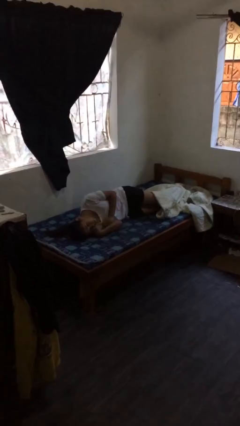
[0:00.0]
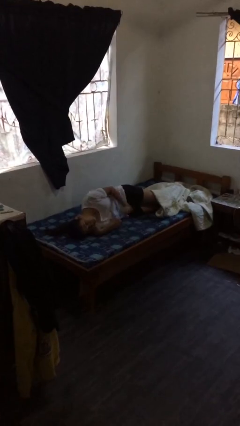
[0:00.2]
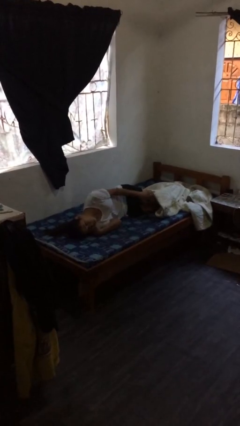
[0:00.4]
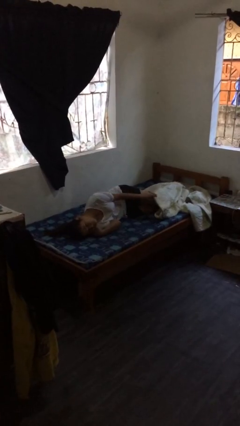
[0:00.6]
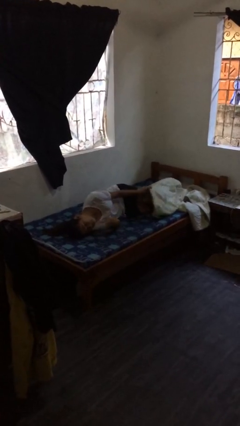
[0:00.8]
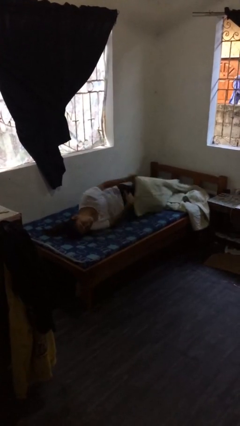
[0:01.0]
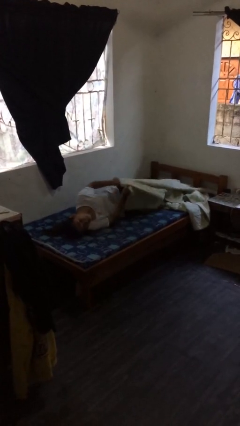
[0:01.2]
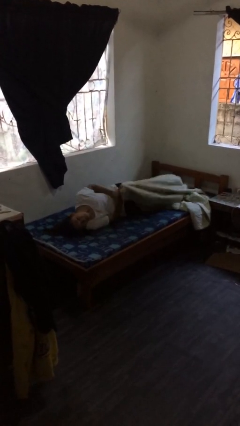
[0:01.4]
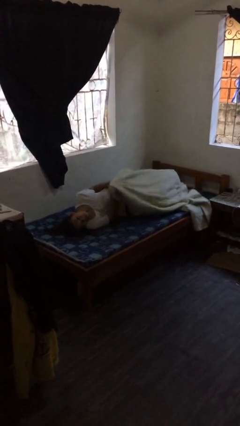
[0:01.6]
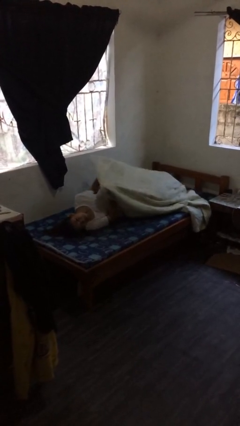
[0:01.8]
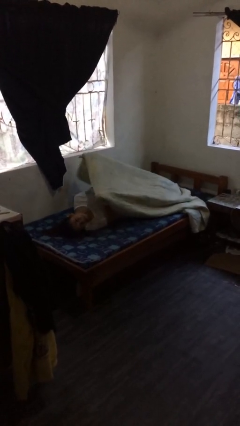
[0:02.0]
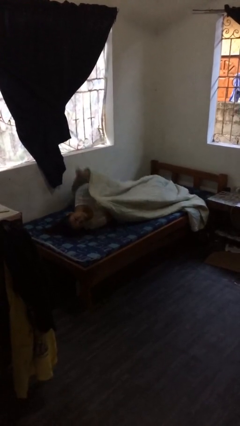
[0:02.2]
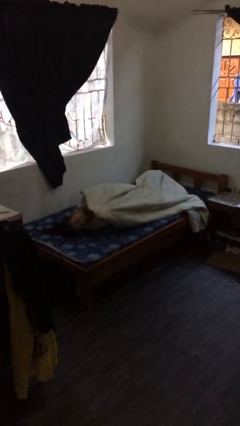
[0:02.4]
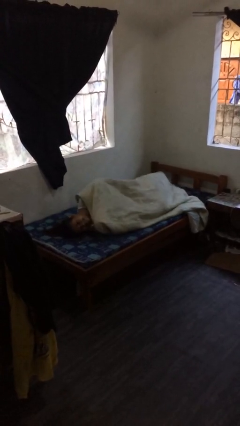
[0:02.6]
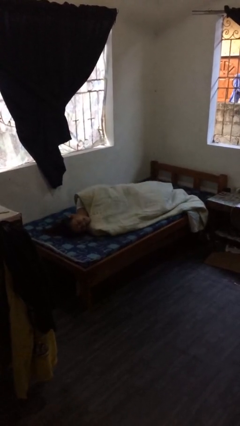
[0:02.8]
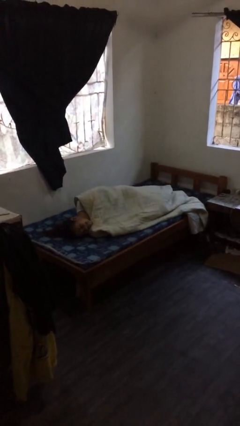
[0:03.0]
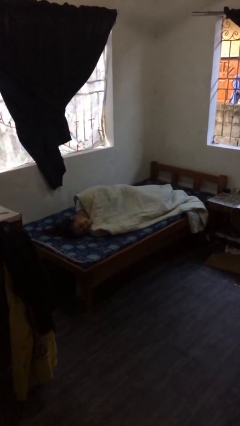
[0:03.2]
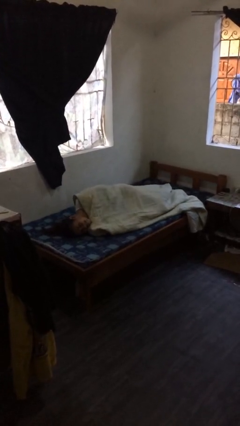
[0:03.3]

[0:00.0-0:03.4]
person covers with bedsheets

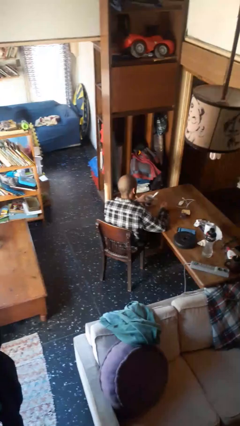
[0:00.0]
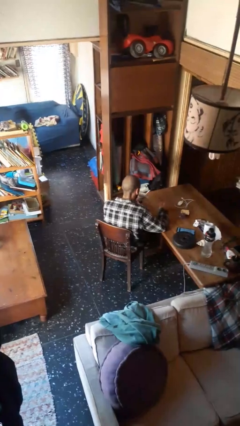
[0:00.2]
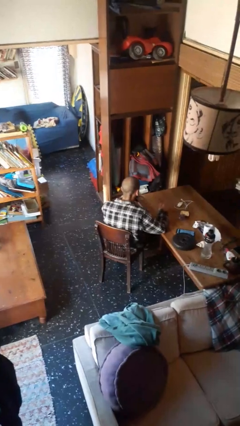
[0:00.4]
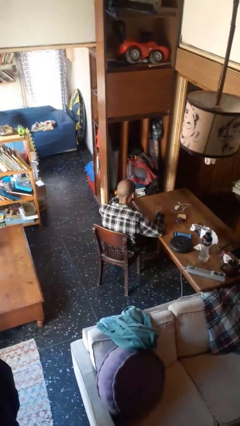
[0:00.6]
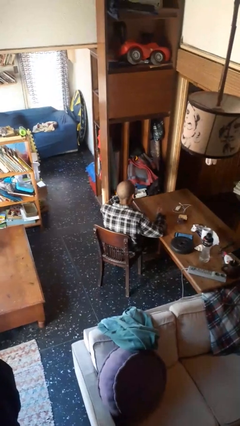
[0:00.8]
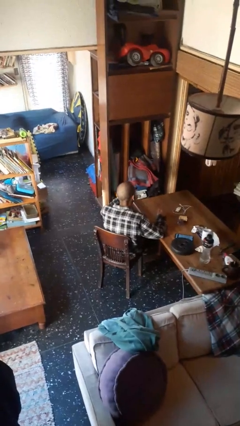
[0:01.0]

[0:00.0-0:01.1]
person drinks from mug

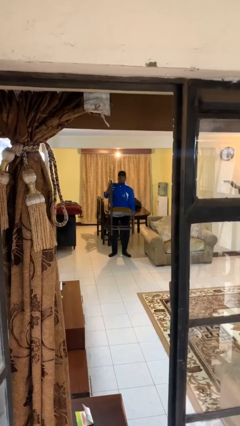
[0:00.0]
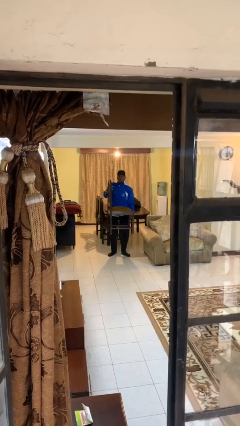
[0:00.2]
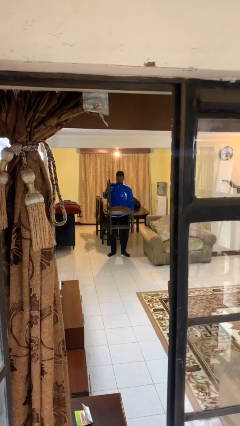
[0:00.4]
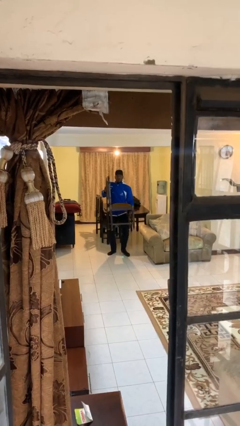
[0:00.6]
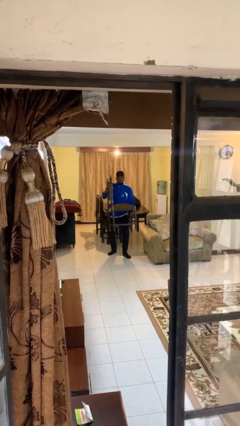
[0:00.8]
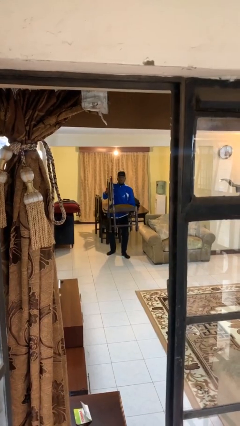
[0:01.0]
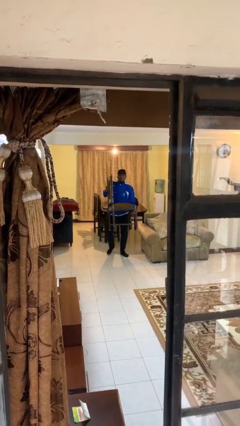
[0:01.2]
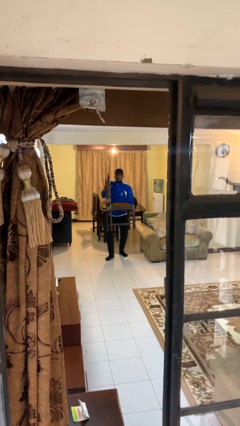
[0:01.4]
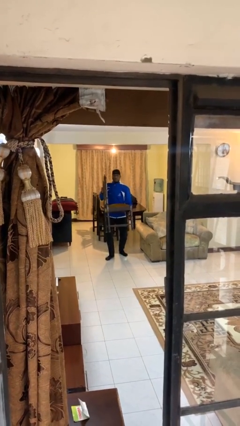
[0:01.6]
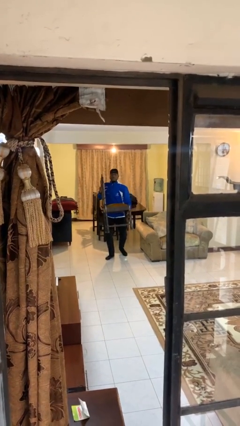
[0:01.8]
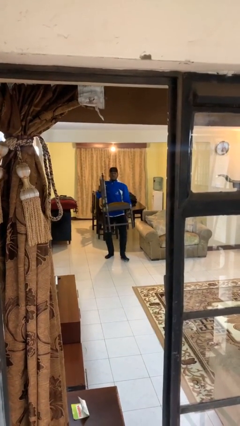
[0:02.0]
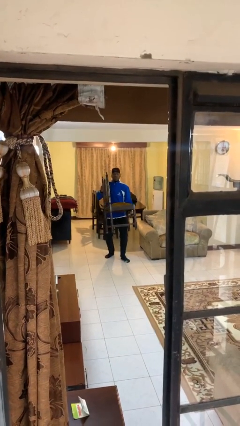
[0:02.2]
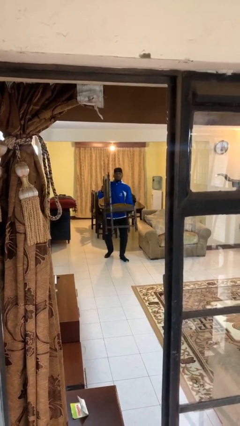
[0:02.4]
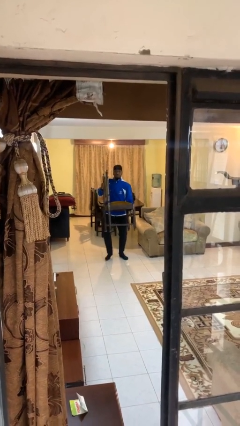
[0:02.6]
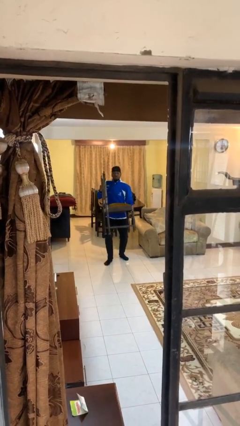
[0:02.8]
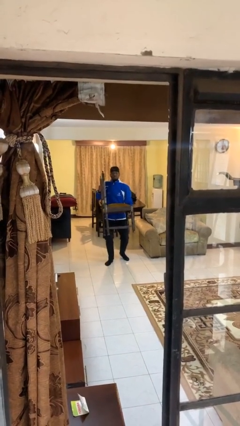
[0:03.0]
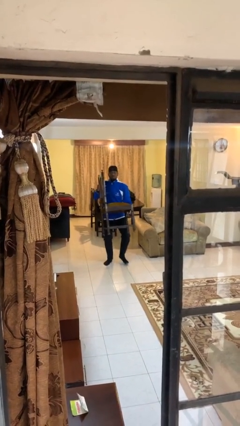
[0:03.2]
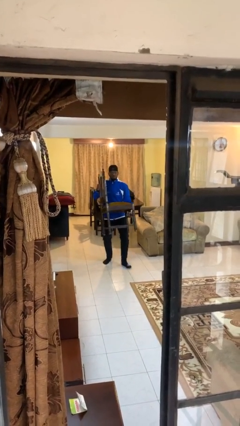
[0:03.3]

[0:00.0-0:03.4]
person carries heavy object

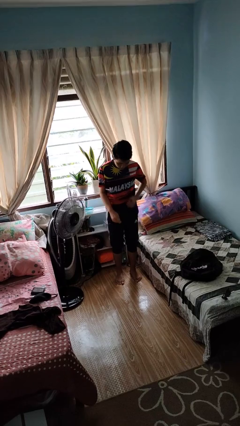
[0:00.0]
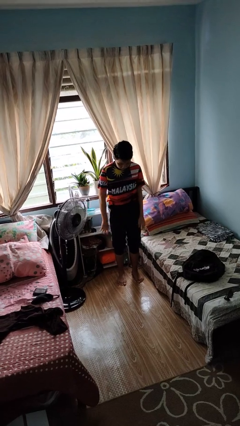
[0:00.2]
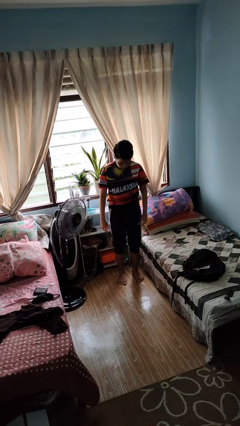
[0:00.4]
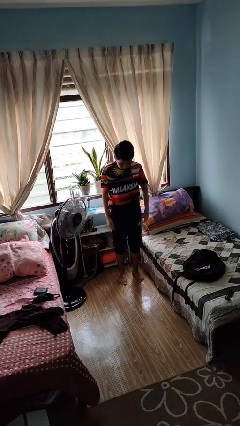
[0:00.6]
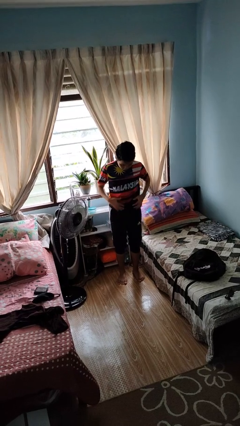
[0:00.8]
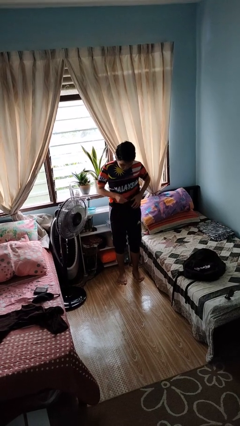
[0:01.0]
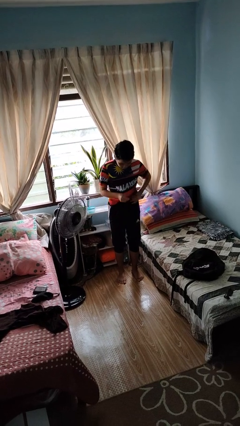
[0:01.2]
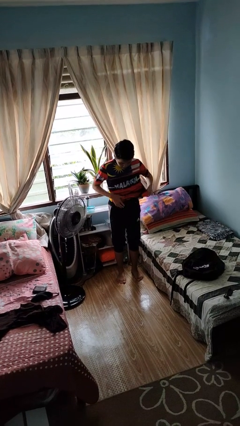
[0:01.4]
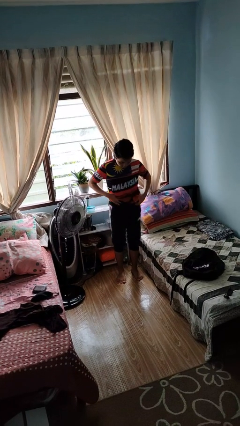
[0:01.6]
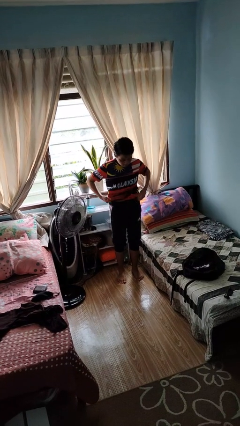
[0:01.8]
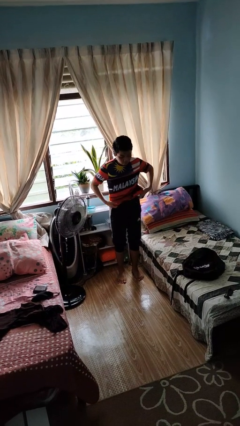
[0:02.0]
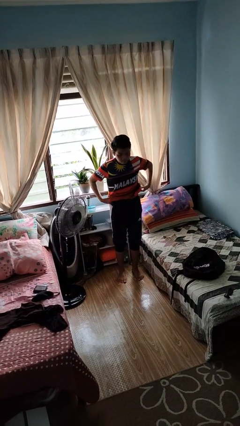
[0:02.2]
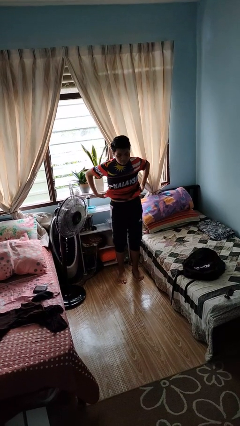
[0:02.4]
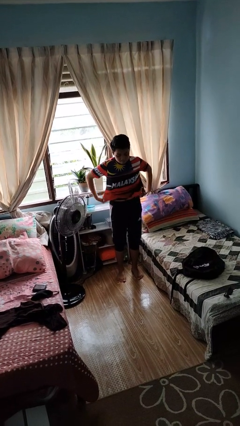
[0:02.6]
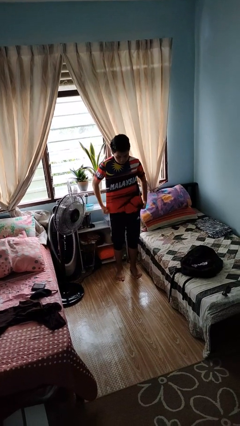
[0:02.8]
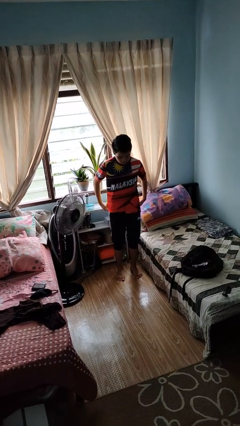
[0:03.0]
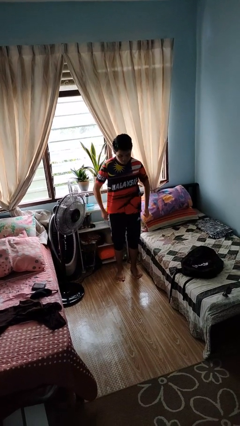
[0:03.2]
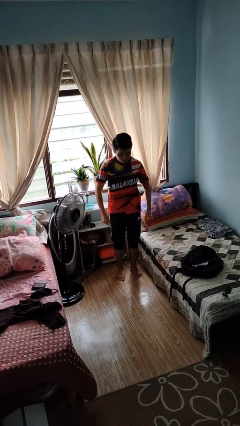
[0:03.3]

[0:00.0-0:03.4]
person untucks shirt

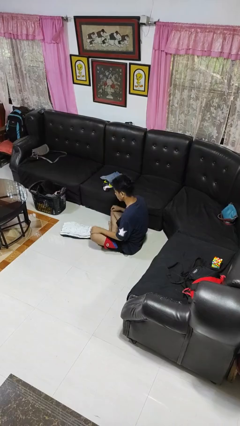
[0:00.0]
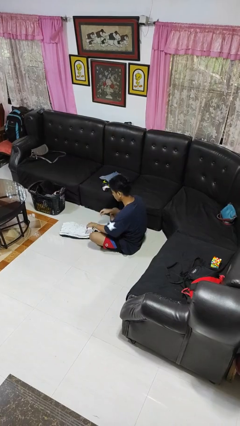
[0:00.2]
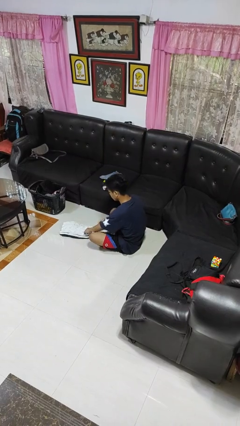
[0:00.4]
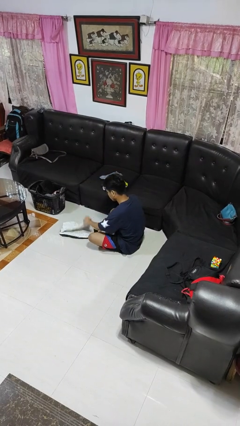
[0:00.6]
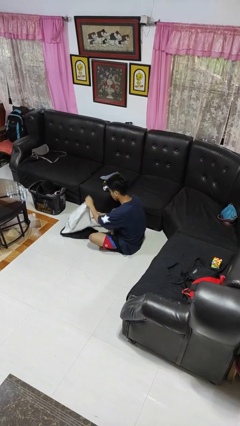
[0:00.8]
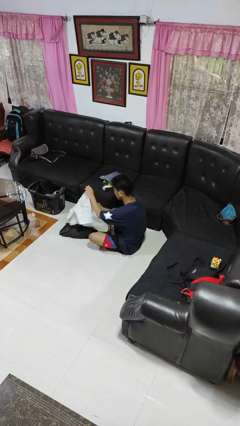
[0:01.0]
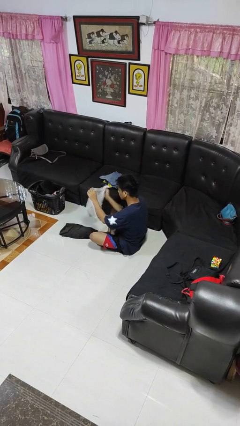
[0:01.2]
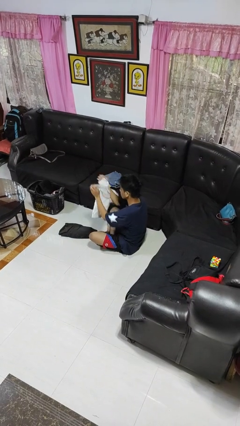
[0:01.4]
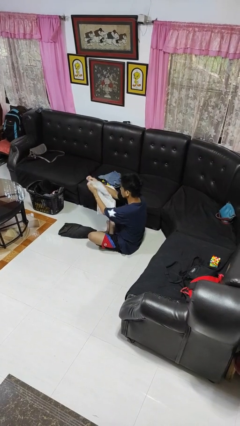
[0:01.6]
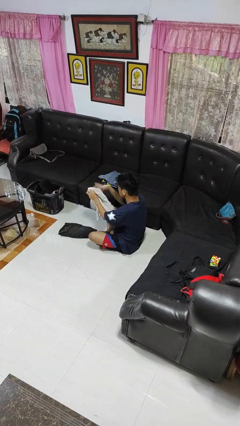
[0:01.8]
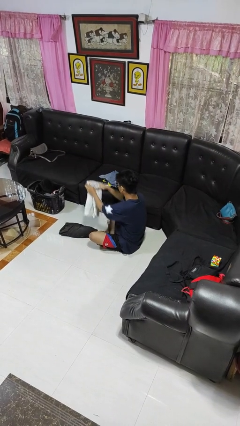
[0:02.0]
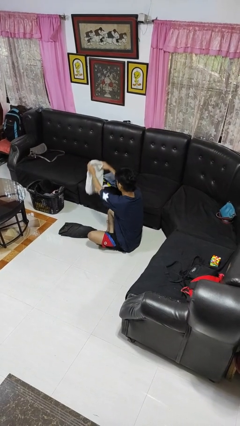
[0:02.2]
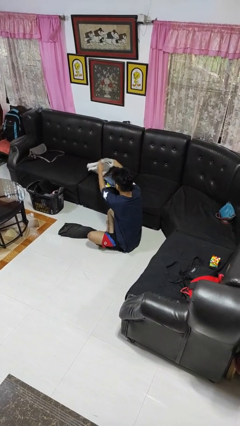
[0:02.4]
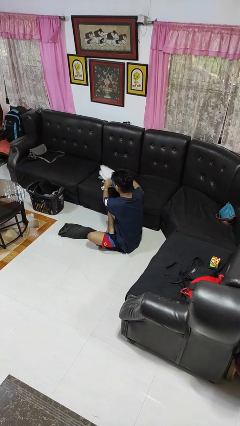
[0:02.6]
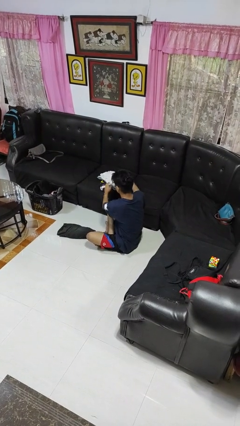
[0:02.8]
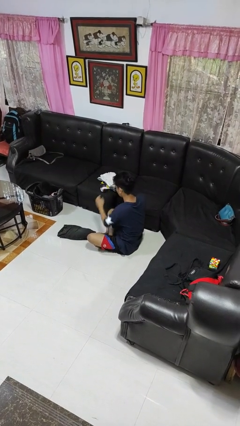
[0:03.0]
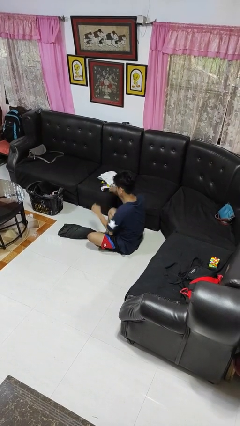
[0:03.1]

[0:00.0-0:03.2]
person folds pants

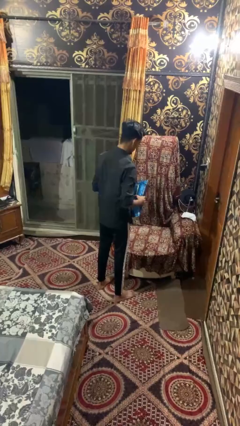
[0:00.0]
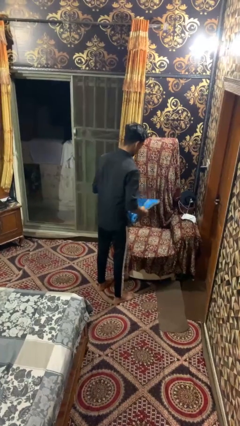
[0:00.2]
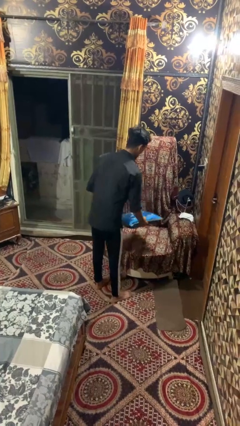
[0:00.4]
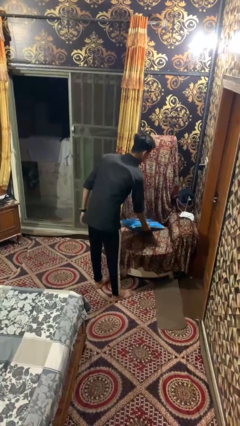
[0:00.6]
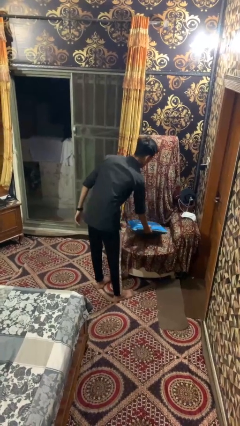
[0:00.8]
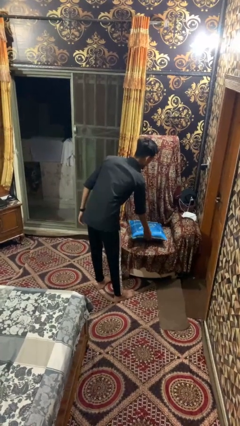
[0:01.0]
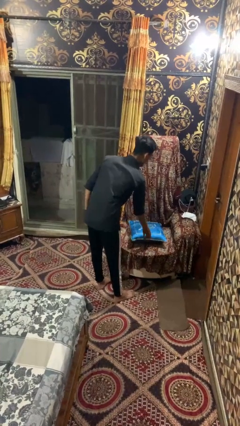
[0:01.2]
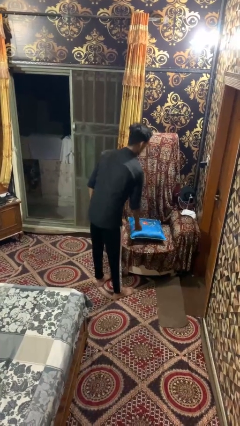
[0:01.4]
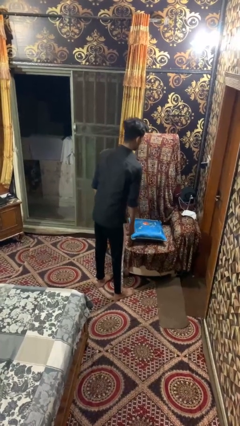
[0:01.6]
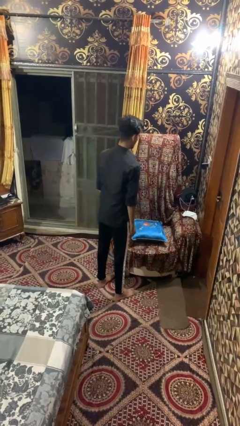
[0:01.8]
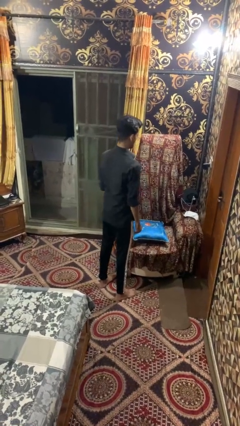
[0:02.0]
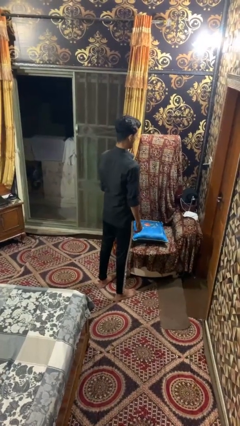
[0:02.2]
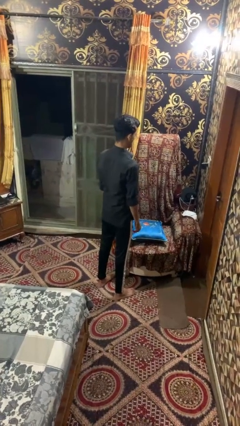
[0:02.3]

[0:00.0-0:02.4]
person puts down object on couch

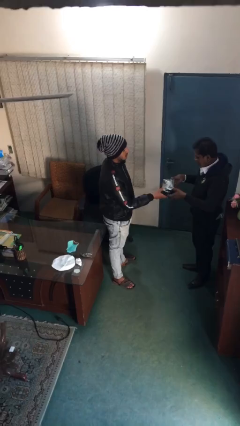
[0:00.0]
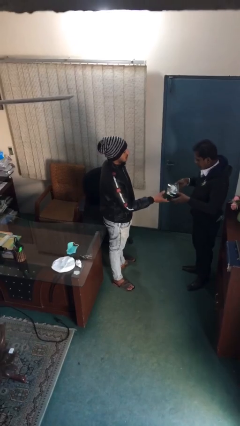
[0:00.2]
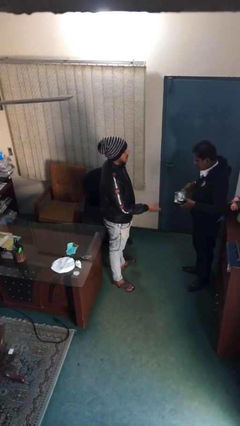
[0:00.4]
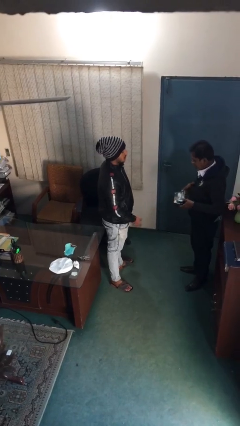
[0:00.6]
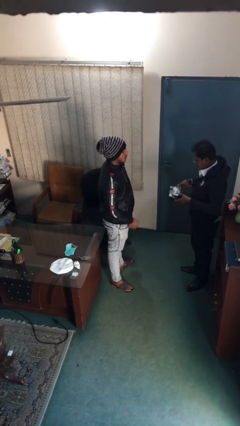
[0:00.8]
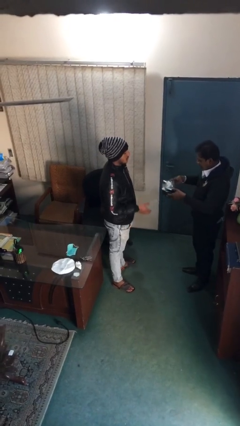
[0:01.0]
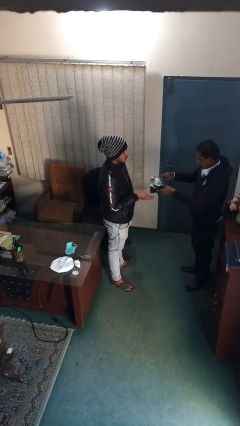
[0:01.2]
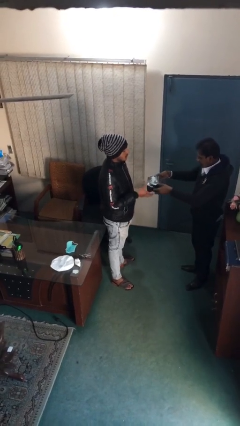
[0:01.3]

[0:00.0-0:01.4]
person transfers object to person
